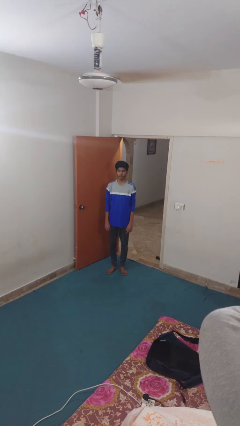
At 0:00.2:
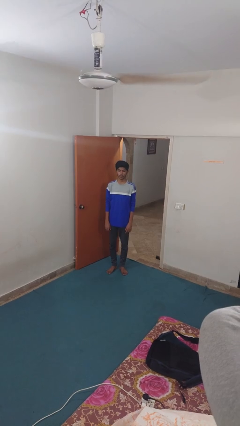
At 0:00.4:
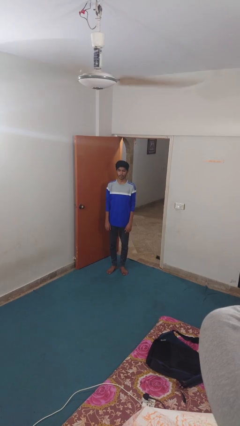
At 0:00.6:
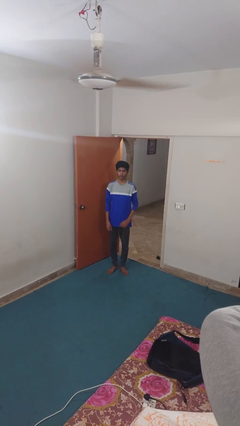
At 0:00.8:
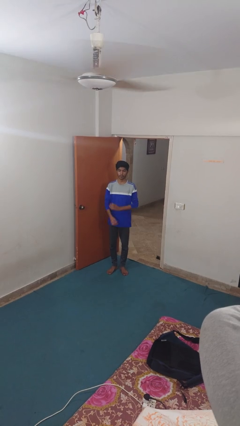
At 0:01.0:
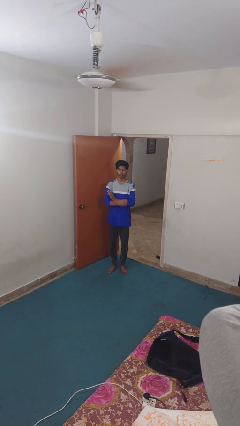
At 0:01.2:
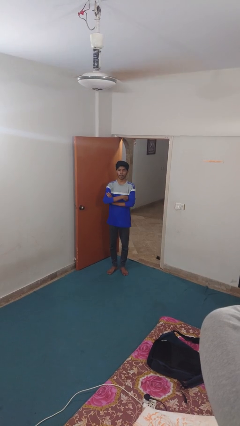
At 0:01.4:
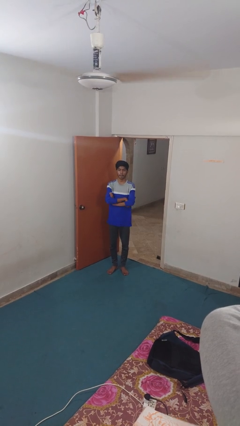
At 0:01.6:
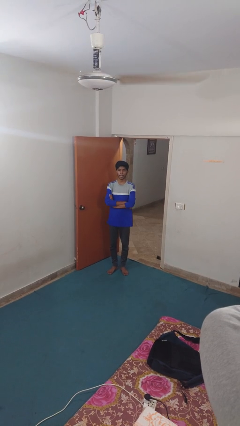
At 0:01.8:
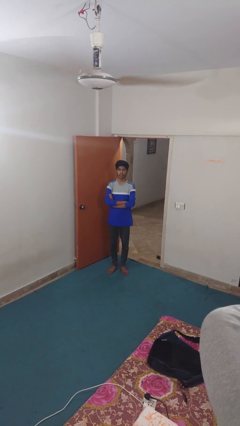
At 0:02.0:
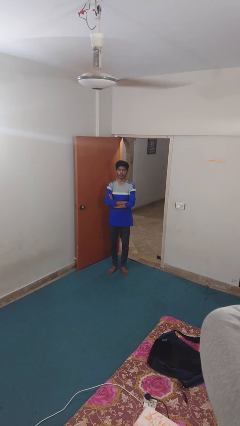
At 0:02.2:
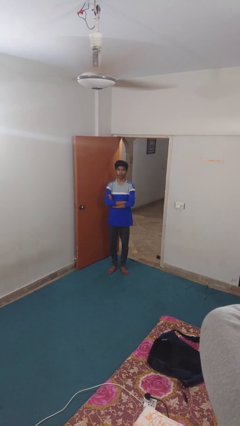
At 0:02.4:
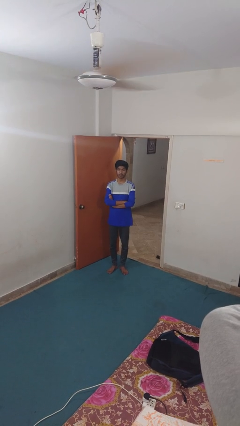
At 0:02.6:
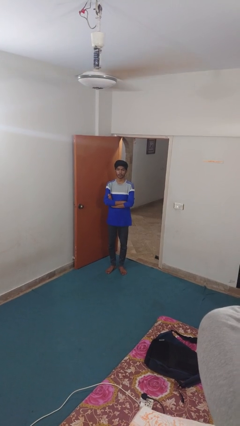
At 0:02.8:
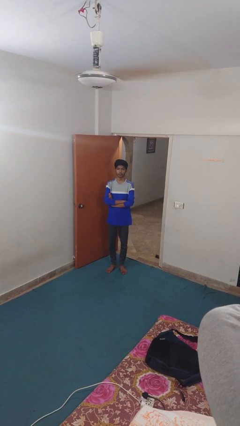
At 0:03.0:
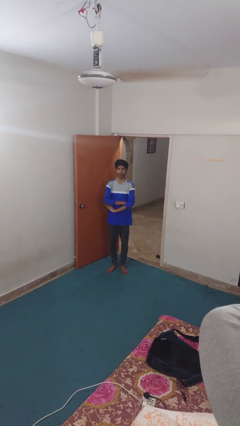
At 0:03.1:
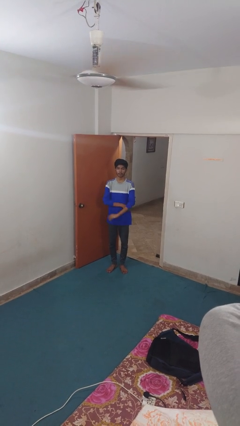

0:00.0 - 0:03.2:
person crosses arms

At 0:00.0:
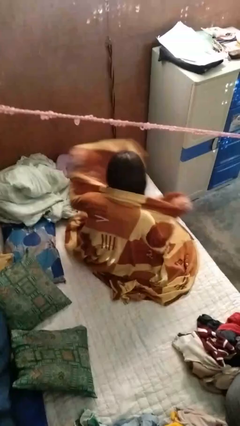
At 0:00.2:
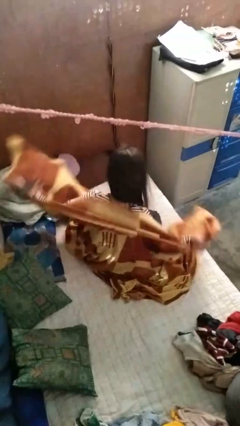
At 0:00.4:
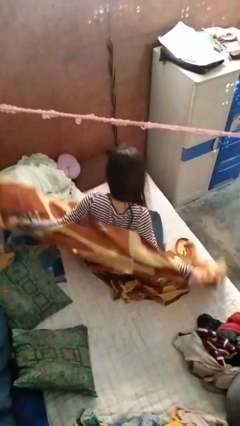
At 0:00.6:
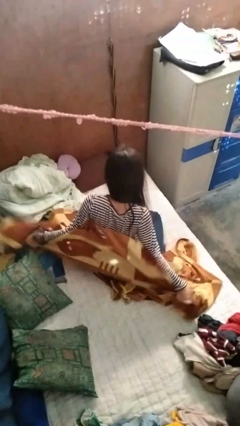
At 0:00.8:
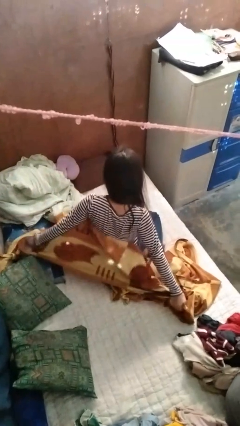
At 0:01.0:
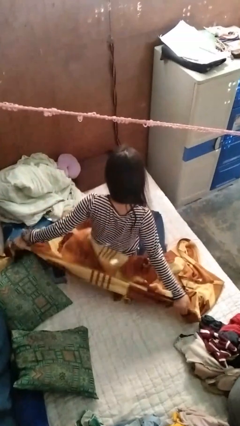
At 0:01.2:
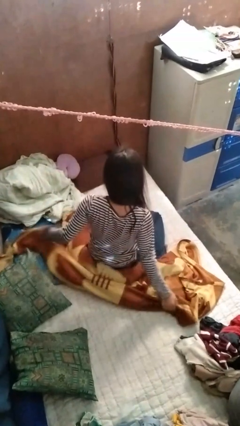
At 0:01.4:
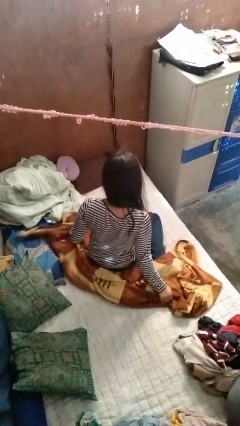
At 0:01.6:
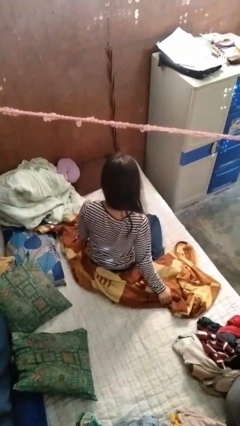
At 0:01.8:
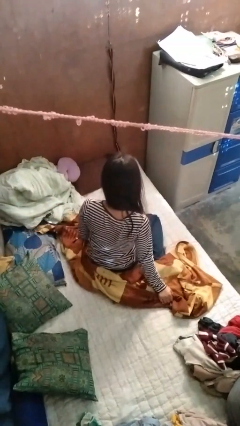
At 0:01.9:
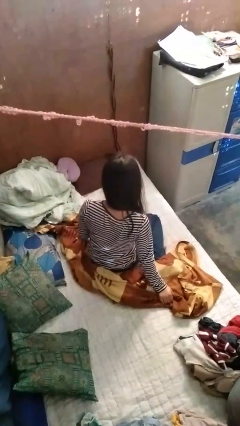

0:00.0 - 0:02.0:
person uncovers with blanket

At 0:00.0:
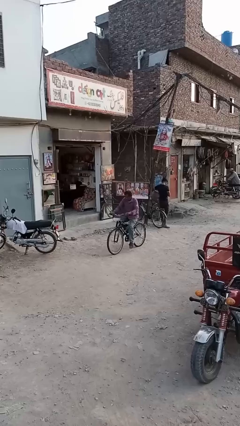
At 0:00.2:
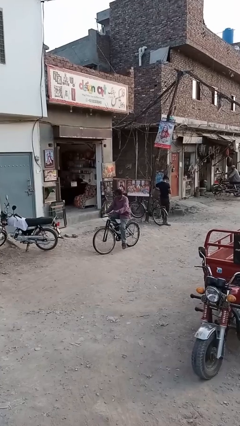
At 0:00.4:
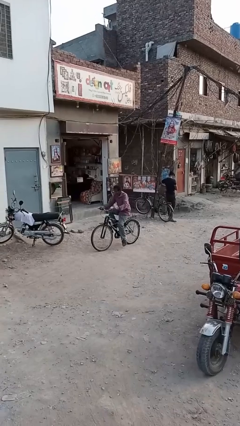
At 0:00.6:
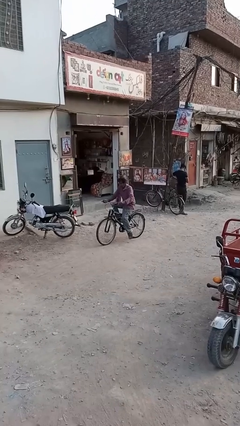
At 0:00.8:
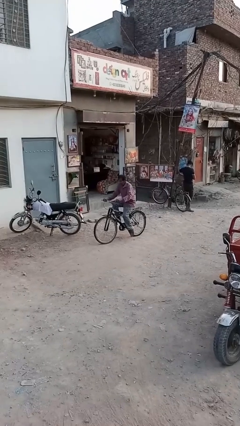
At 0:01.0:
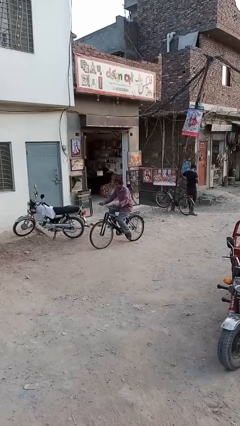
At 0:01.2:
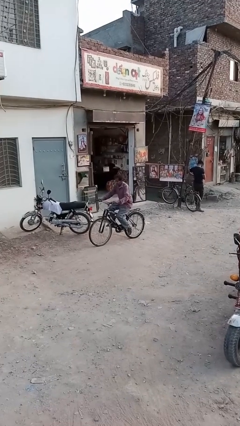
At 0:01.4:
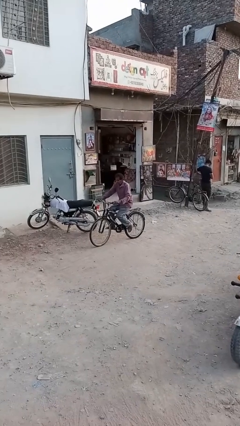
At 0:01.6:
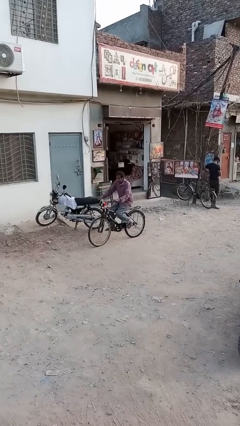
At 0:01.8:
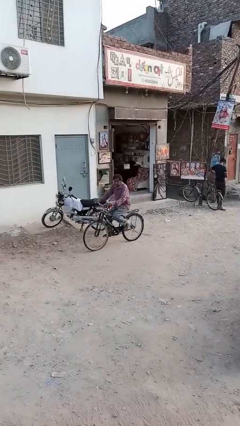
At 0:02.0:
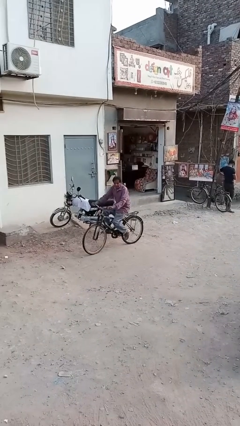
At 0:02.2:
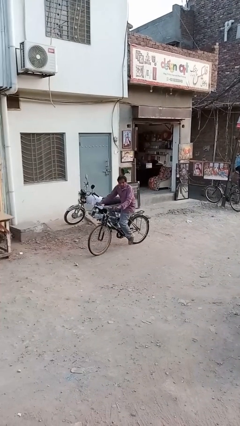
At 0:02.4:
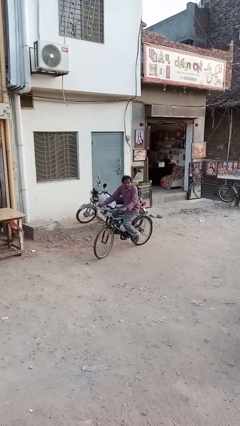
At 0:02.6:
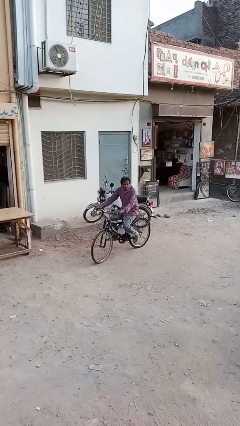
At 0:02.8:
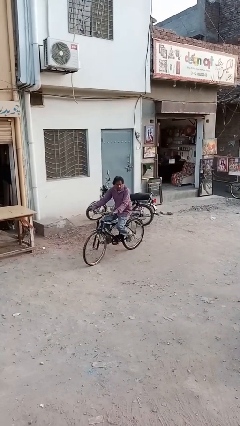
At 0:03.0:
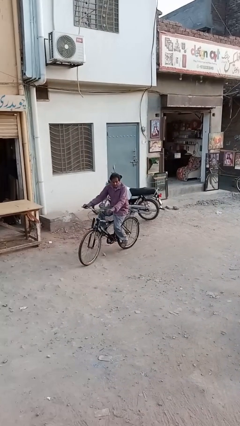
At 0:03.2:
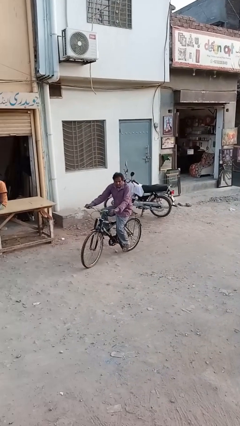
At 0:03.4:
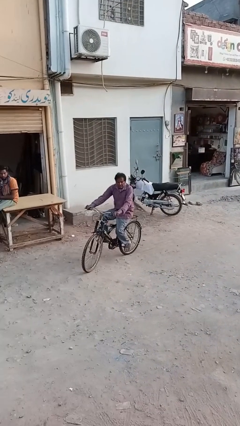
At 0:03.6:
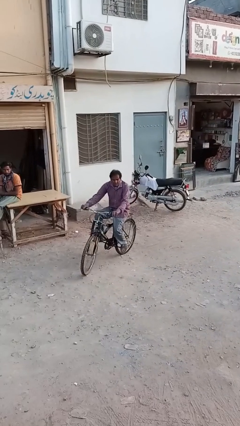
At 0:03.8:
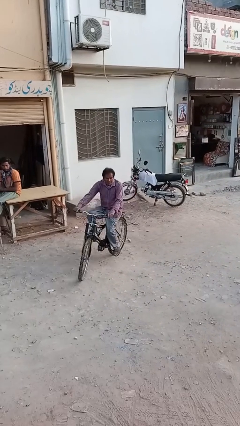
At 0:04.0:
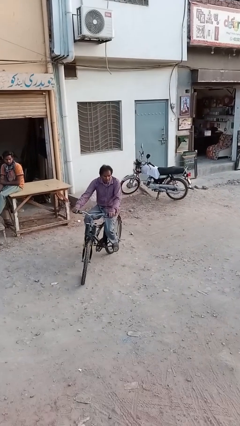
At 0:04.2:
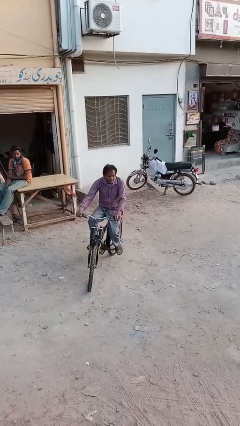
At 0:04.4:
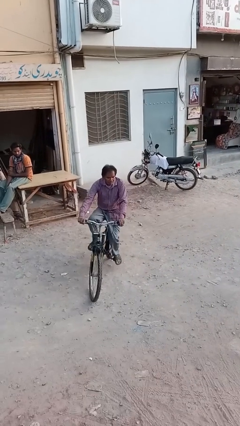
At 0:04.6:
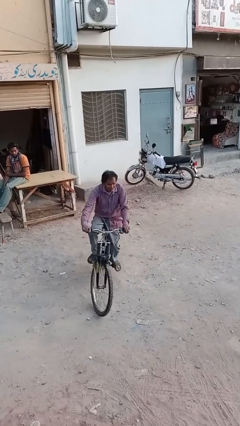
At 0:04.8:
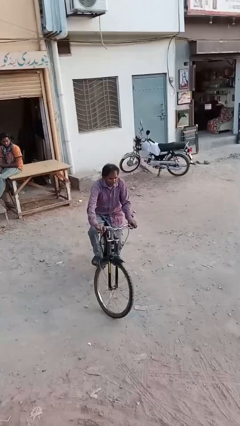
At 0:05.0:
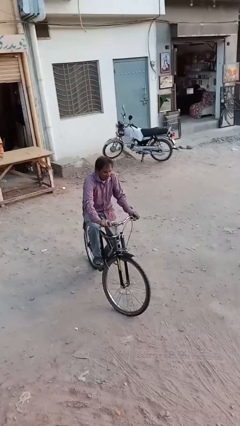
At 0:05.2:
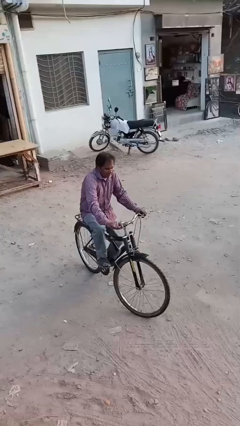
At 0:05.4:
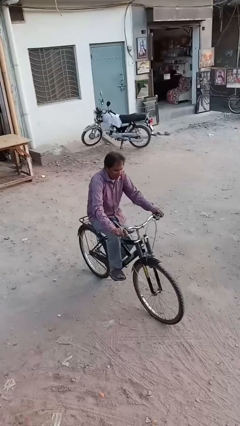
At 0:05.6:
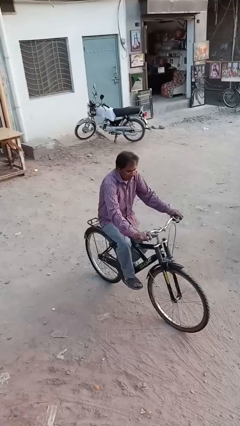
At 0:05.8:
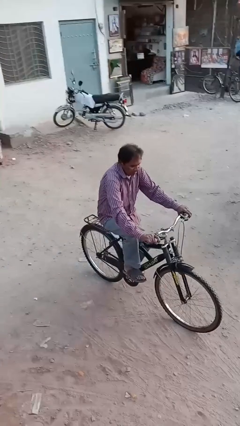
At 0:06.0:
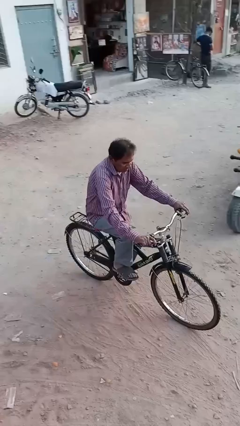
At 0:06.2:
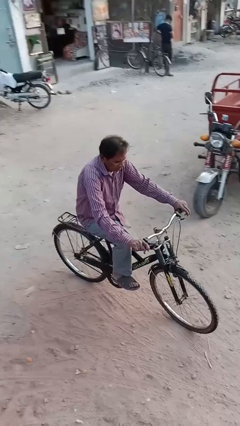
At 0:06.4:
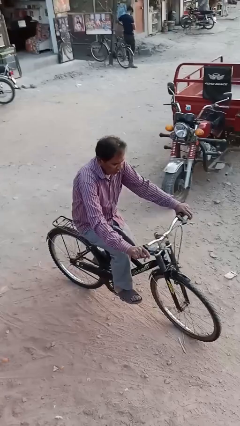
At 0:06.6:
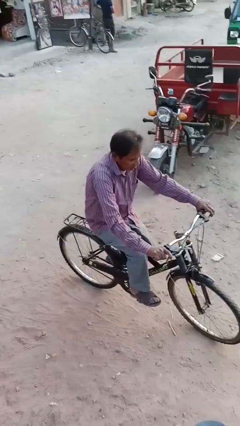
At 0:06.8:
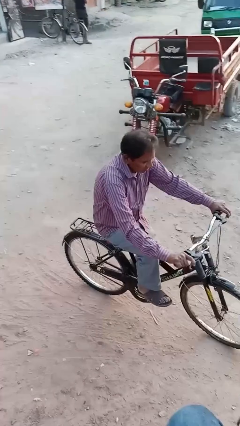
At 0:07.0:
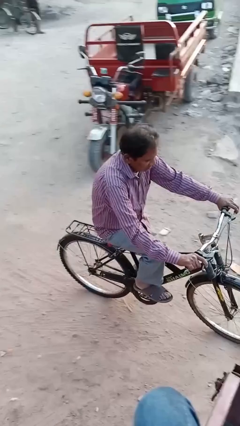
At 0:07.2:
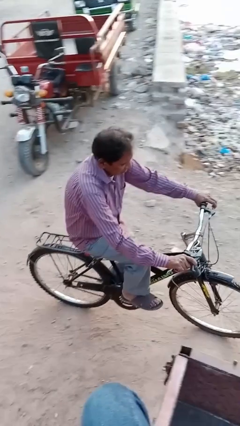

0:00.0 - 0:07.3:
person rides bicycle

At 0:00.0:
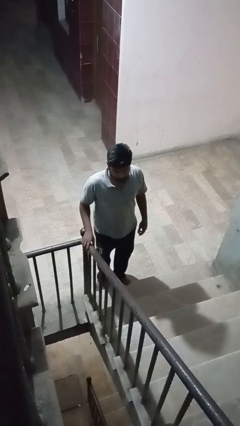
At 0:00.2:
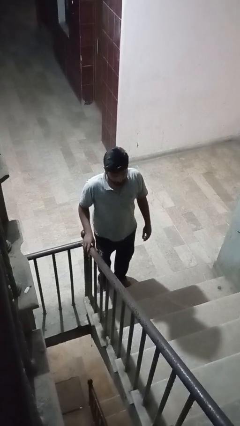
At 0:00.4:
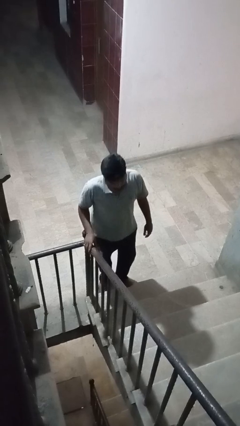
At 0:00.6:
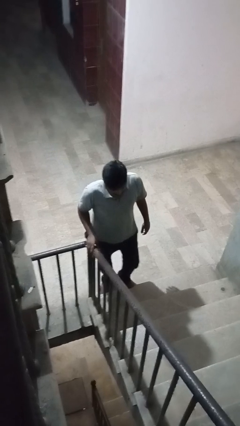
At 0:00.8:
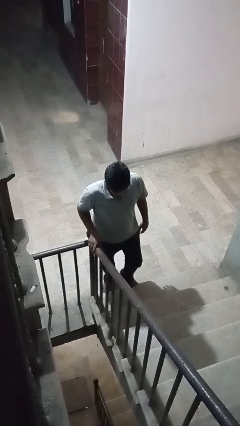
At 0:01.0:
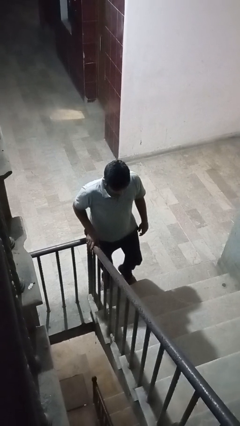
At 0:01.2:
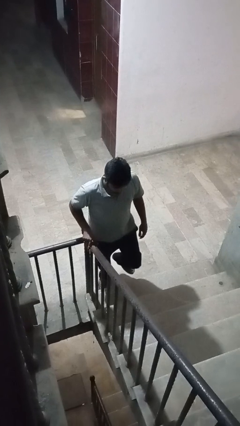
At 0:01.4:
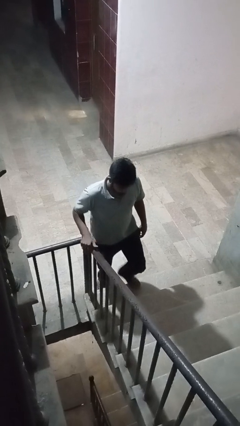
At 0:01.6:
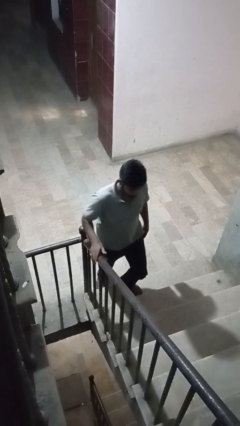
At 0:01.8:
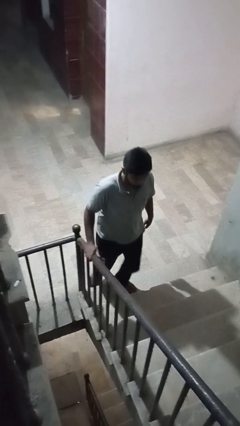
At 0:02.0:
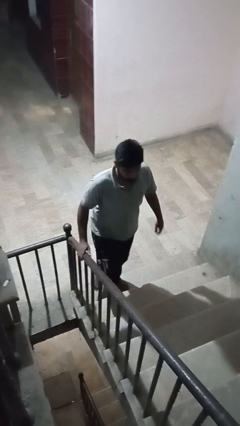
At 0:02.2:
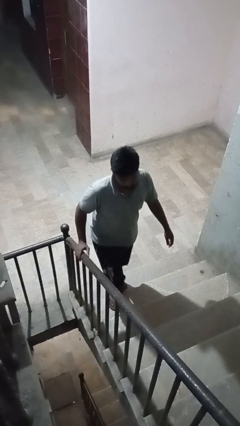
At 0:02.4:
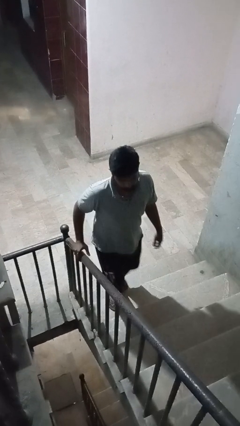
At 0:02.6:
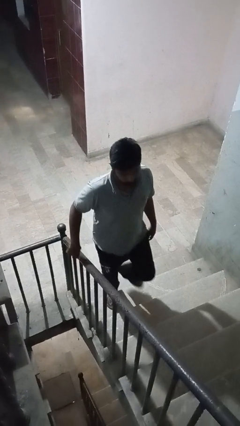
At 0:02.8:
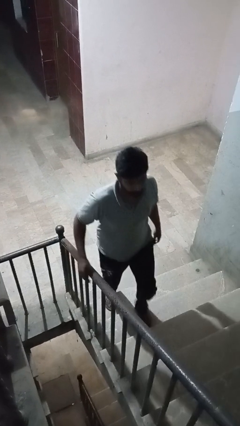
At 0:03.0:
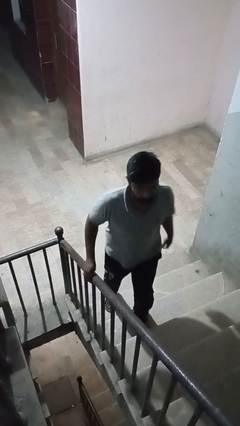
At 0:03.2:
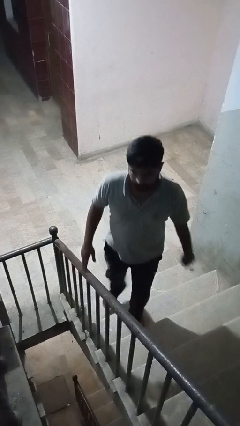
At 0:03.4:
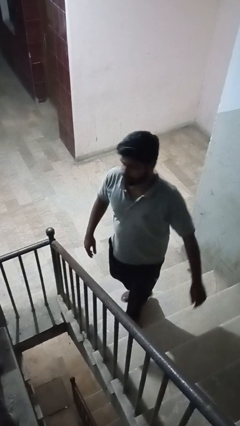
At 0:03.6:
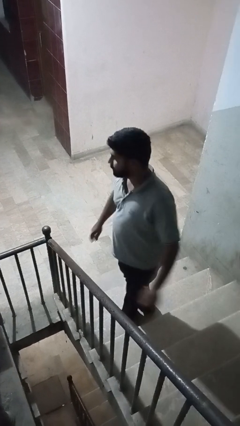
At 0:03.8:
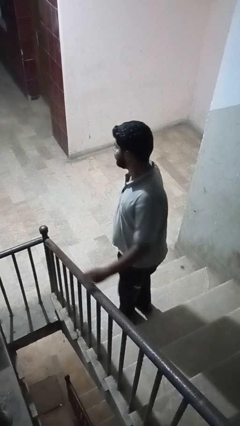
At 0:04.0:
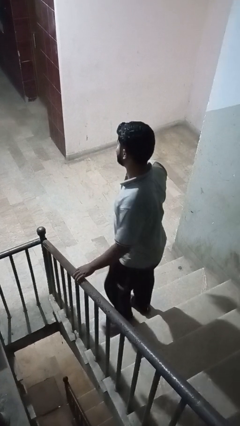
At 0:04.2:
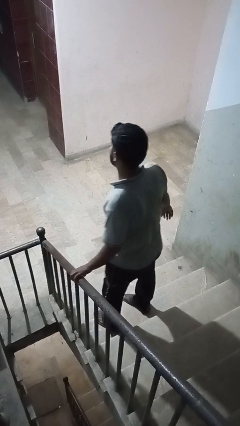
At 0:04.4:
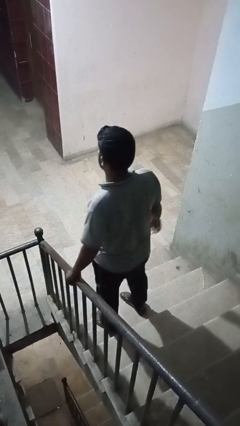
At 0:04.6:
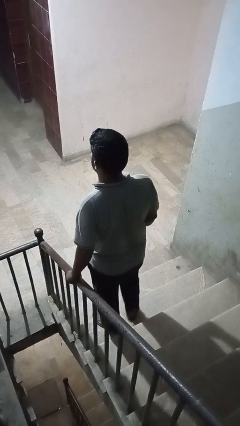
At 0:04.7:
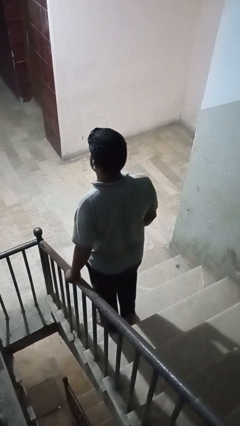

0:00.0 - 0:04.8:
person climbs up stairs

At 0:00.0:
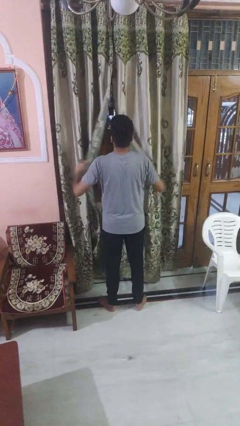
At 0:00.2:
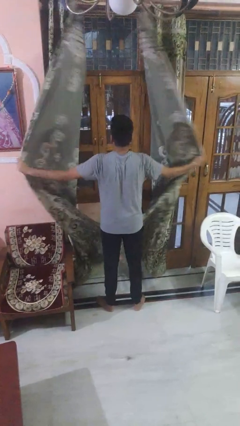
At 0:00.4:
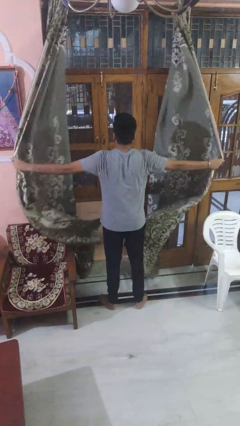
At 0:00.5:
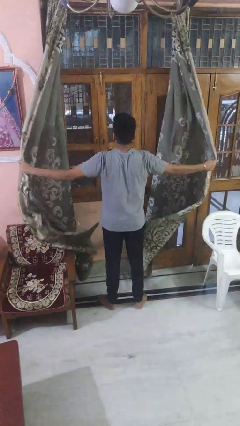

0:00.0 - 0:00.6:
person opens curtains
